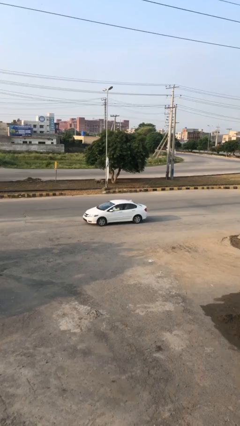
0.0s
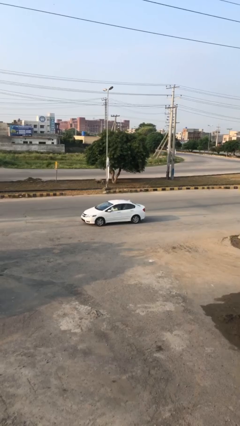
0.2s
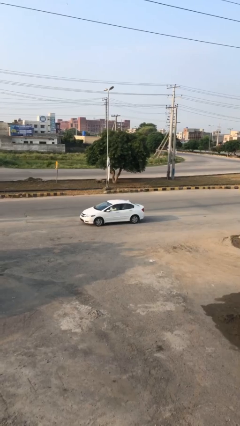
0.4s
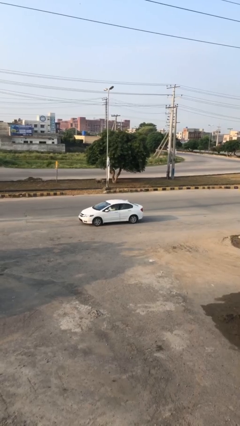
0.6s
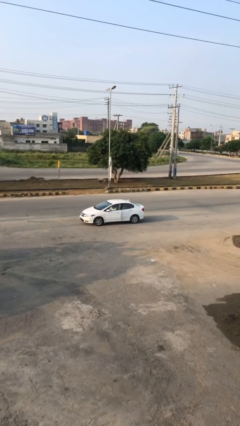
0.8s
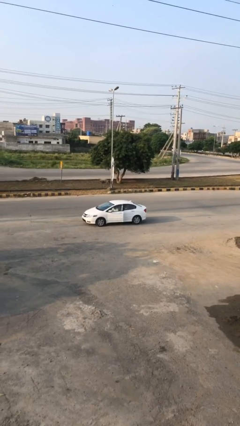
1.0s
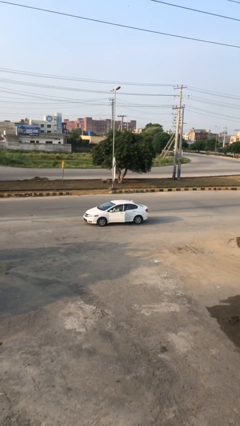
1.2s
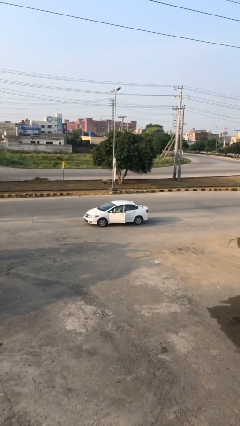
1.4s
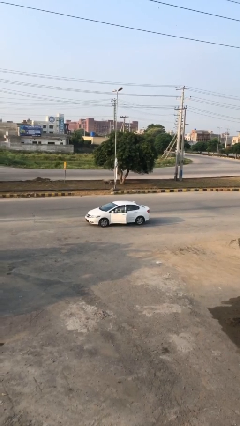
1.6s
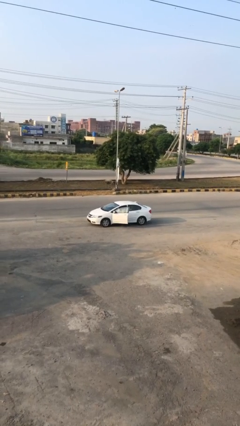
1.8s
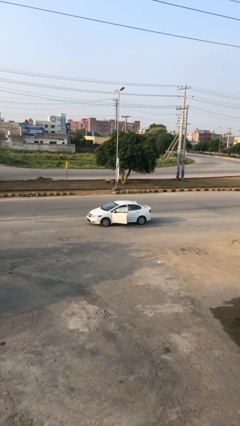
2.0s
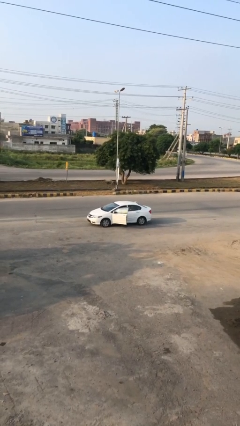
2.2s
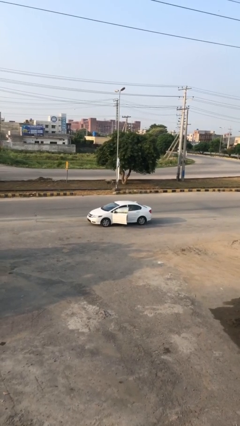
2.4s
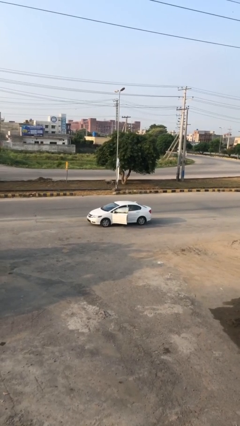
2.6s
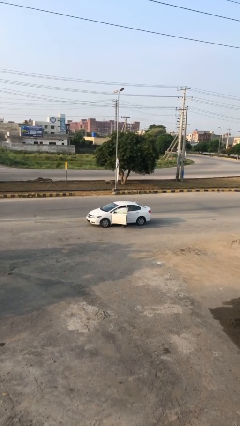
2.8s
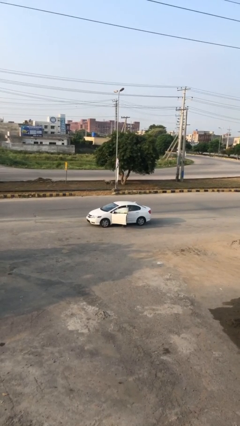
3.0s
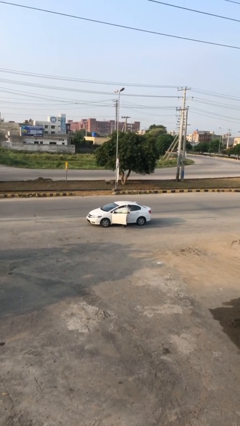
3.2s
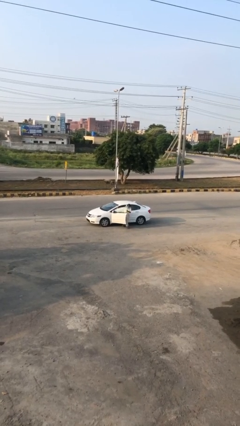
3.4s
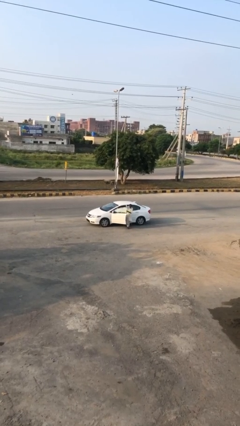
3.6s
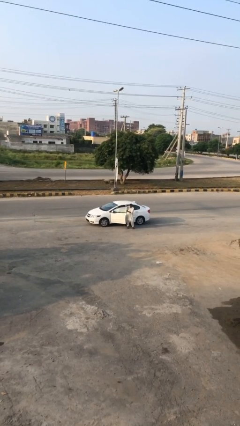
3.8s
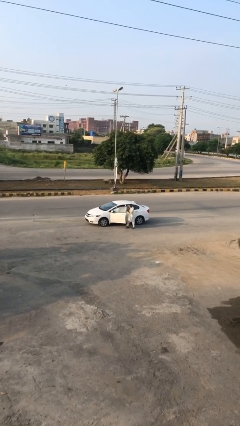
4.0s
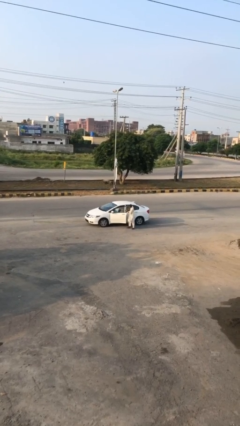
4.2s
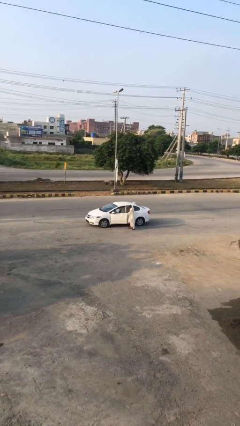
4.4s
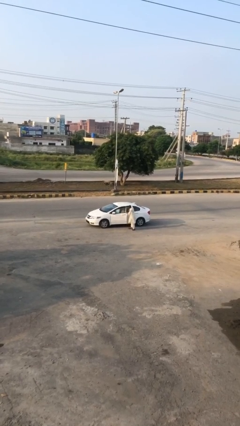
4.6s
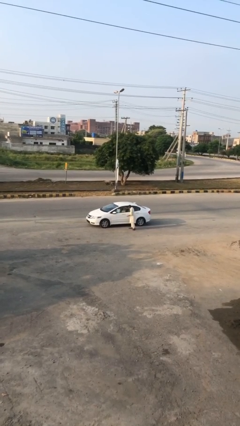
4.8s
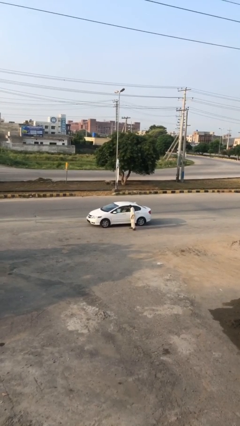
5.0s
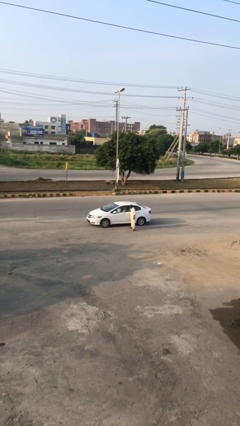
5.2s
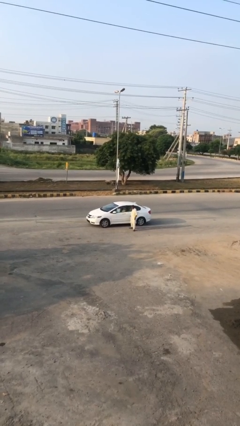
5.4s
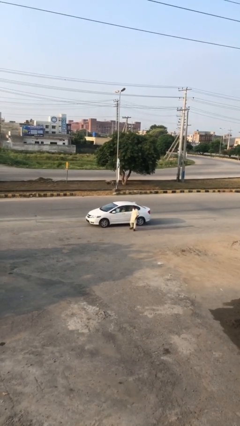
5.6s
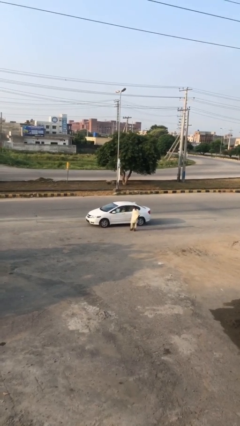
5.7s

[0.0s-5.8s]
car drops off person

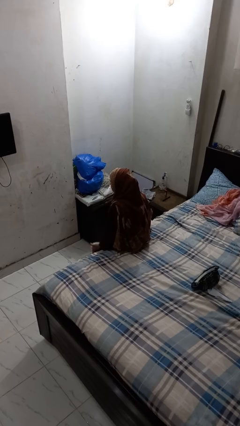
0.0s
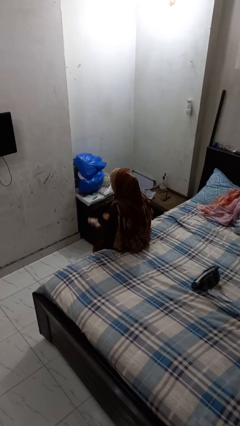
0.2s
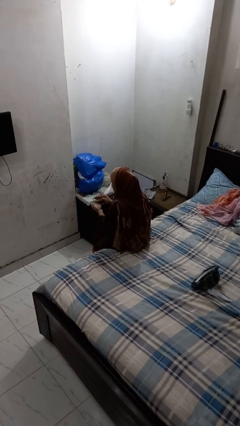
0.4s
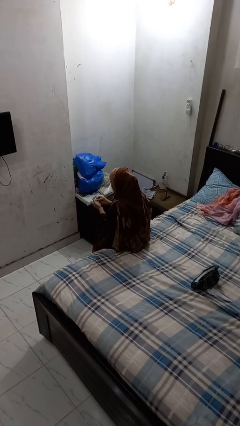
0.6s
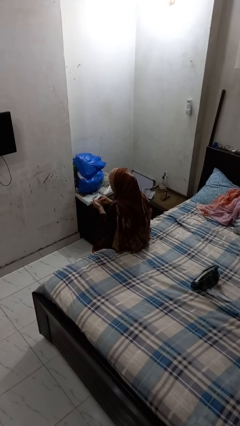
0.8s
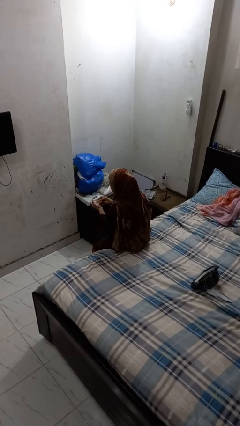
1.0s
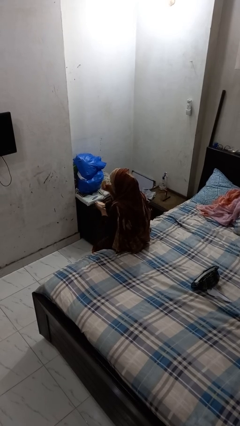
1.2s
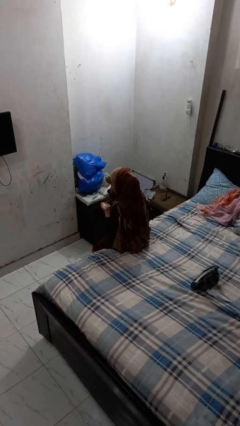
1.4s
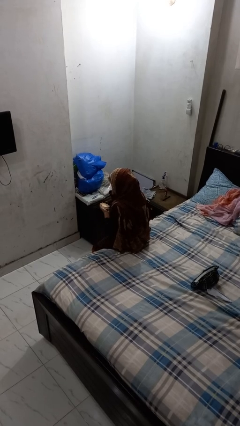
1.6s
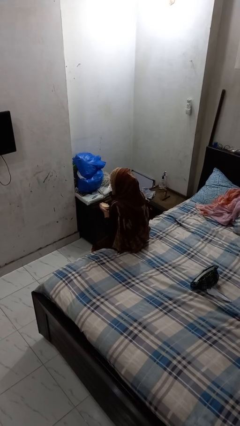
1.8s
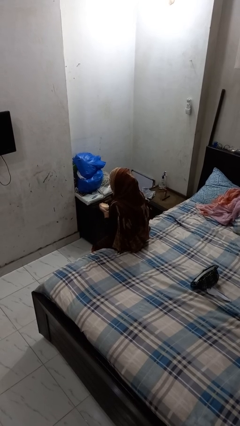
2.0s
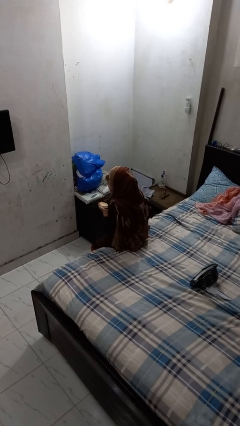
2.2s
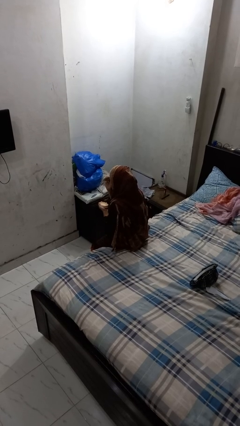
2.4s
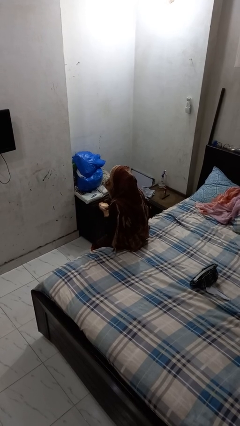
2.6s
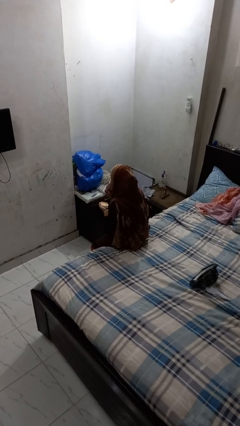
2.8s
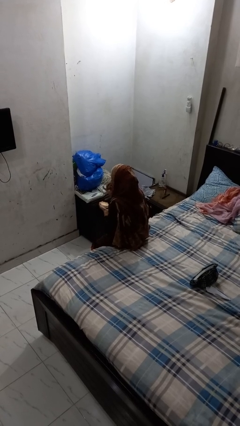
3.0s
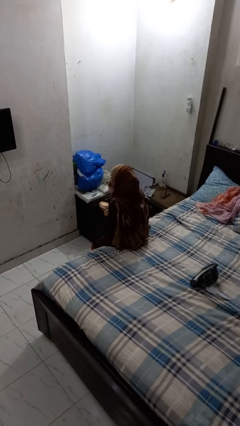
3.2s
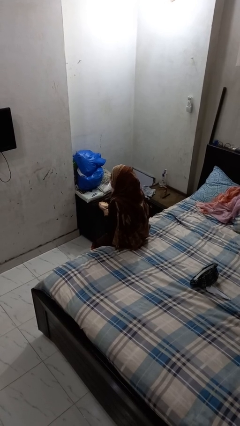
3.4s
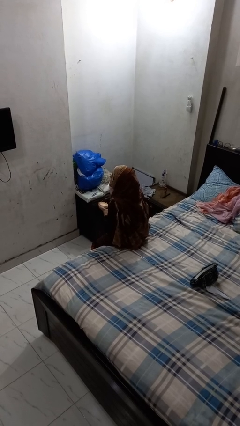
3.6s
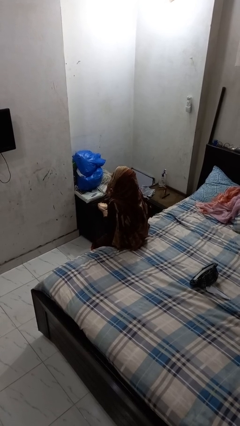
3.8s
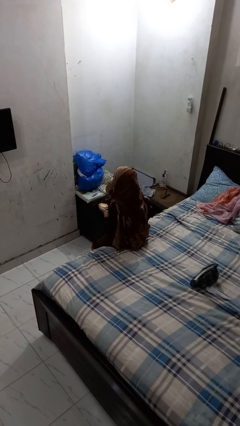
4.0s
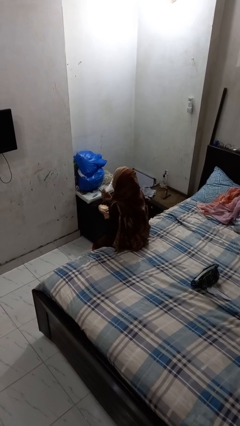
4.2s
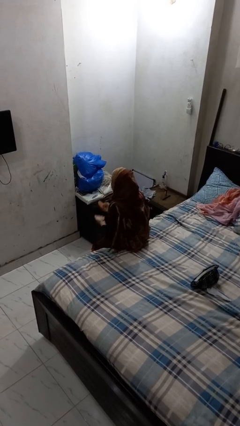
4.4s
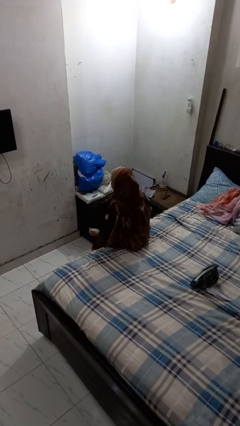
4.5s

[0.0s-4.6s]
person applies foundation makeup

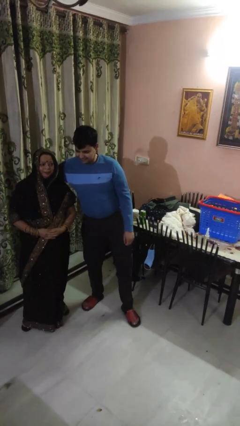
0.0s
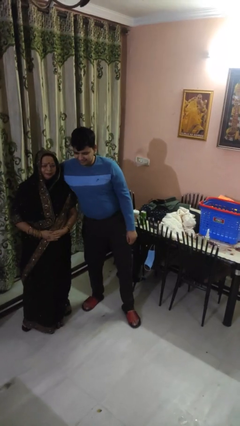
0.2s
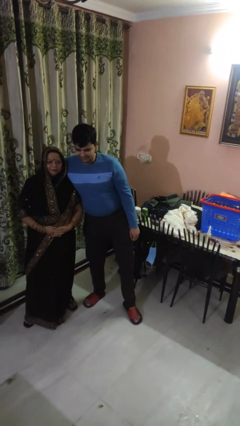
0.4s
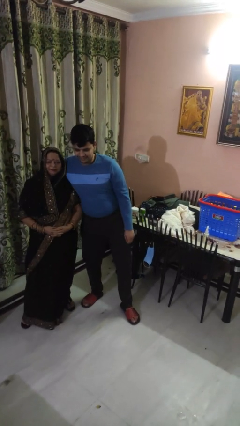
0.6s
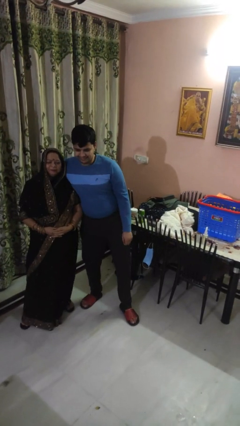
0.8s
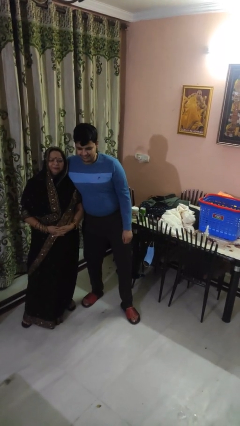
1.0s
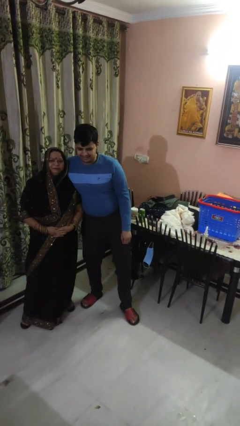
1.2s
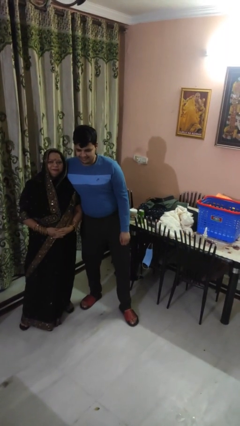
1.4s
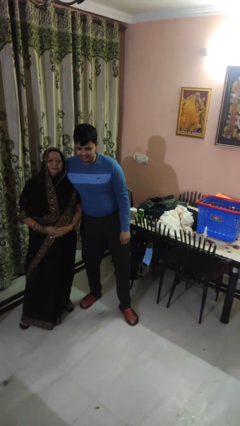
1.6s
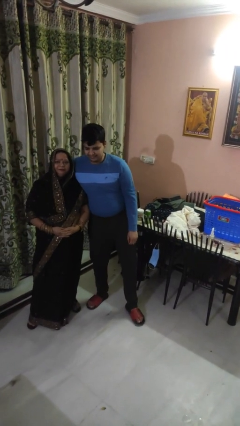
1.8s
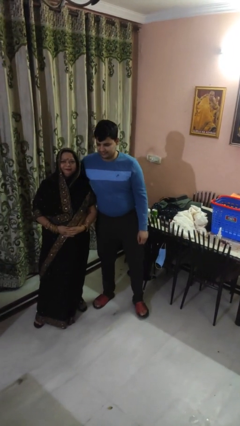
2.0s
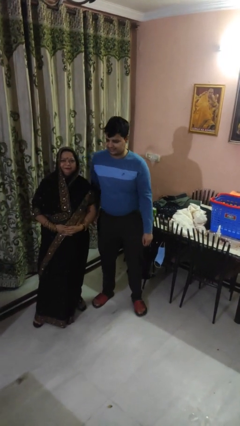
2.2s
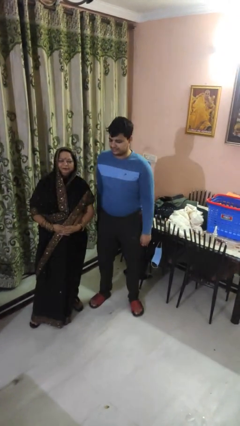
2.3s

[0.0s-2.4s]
person hugs person from side

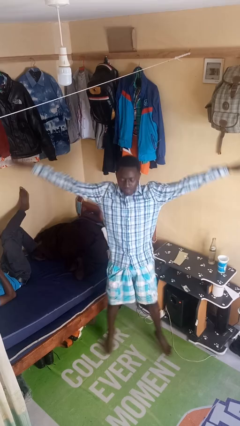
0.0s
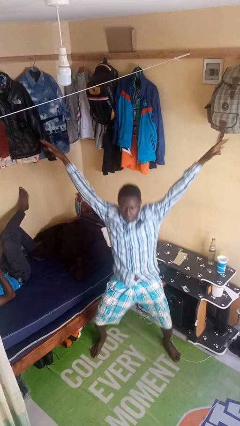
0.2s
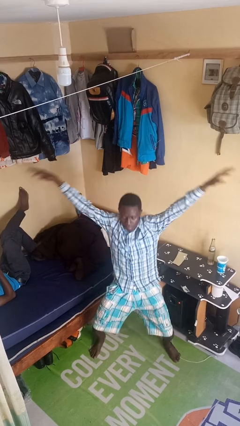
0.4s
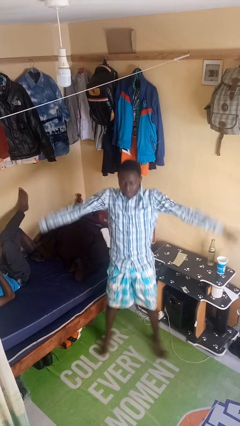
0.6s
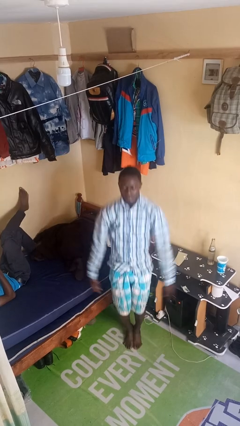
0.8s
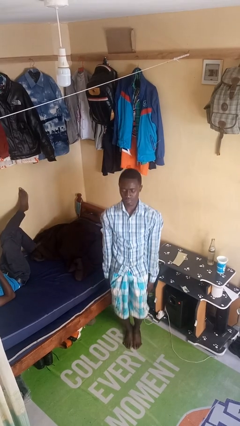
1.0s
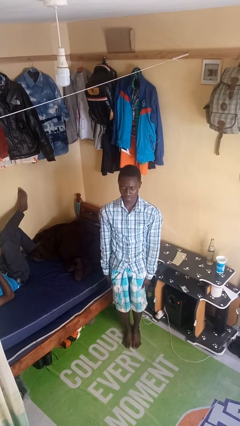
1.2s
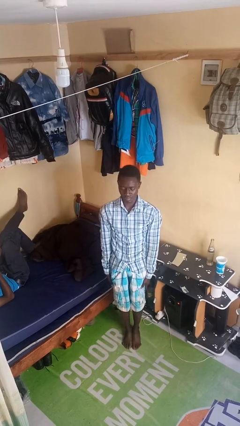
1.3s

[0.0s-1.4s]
person exercises with jumping jacks

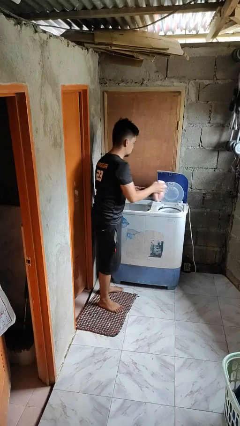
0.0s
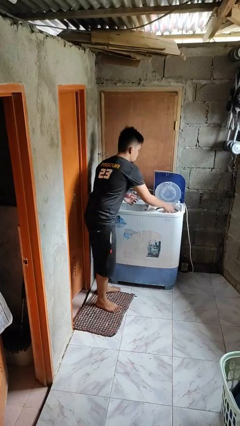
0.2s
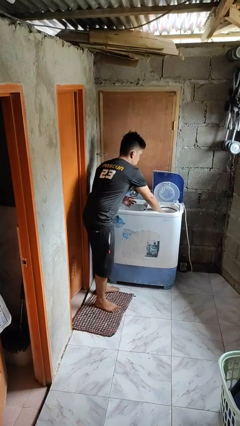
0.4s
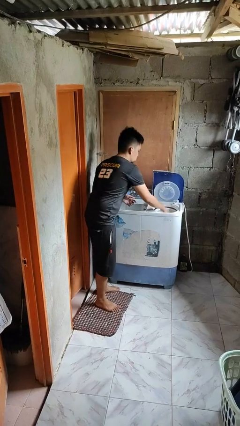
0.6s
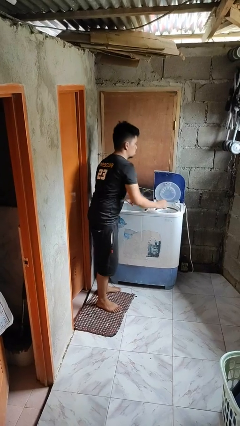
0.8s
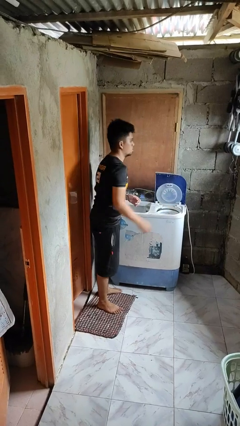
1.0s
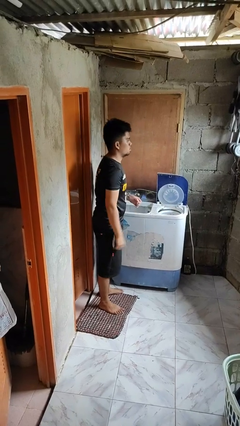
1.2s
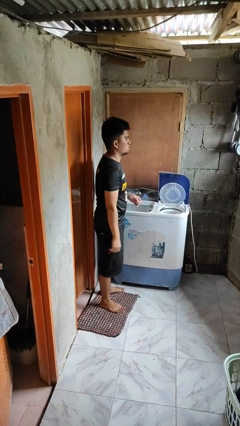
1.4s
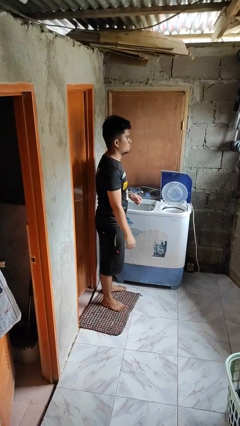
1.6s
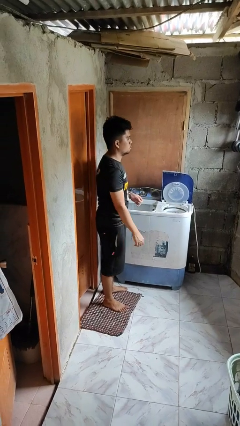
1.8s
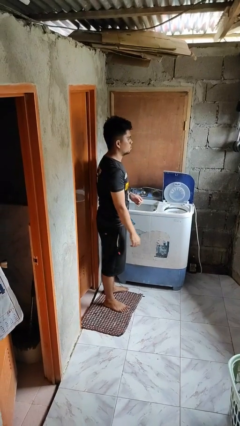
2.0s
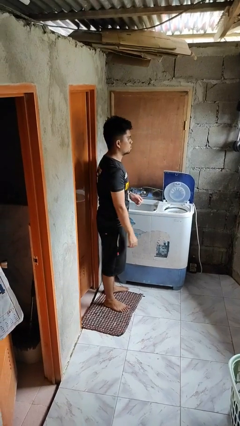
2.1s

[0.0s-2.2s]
person loads dryer

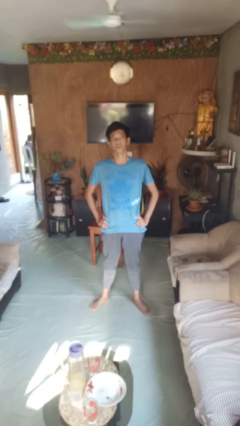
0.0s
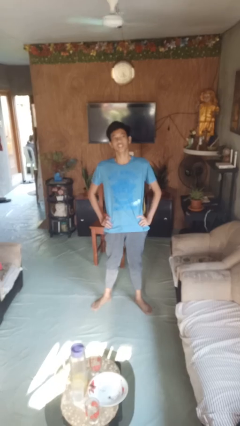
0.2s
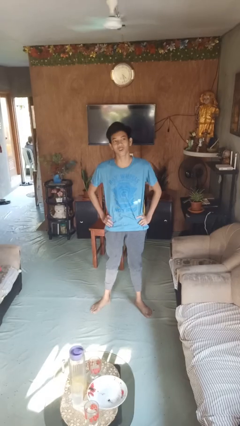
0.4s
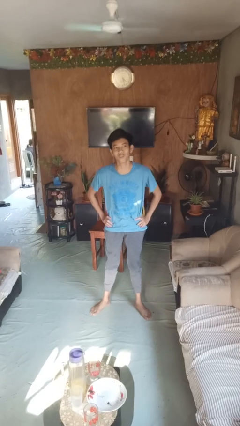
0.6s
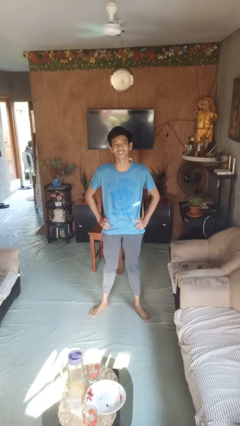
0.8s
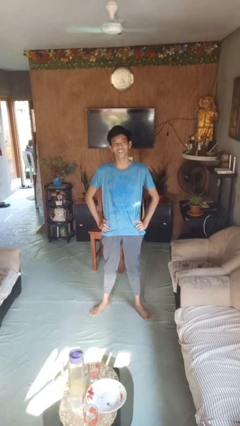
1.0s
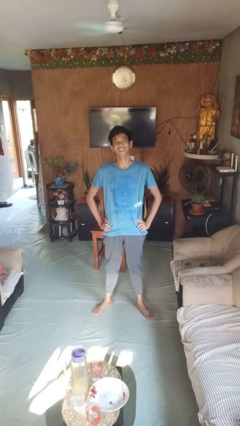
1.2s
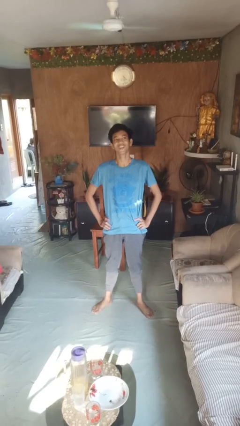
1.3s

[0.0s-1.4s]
person wiggles hips
